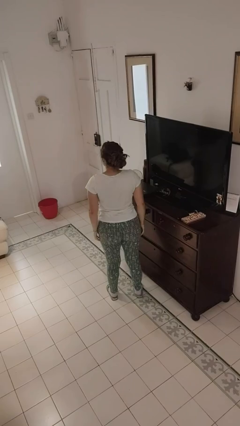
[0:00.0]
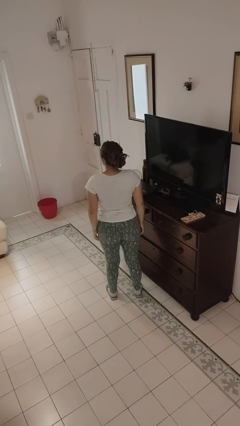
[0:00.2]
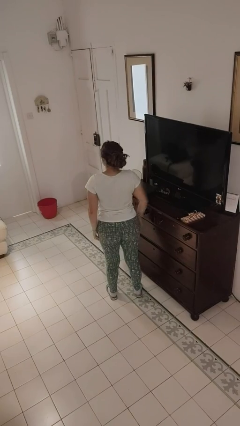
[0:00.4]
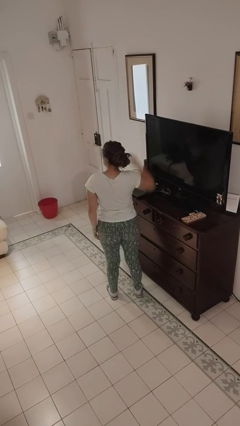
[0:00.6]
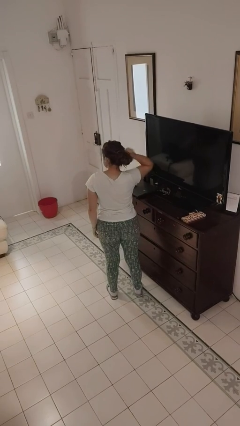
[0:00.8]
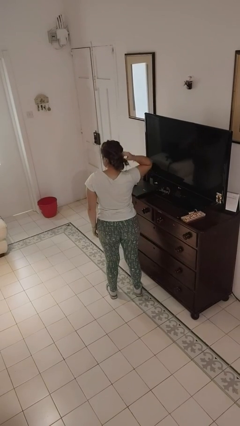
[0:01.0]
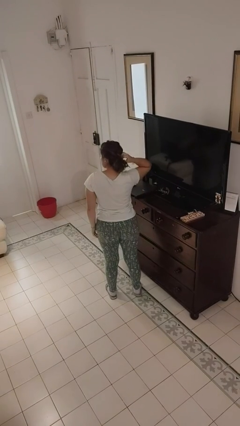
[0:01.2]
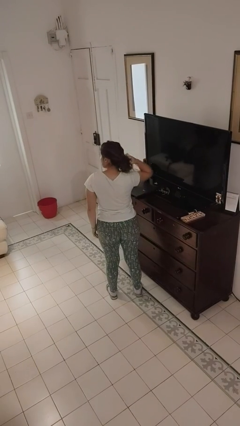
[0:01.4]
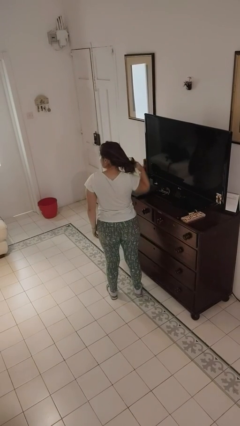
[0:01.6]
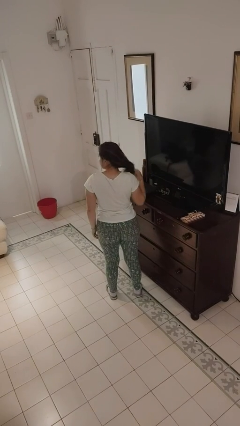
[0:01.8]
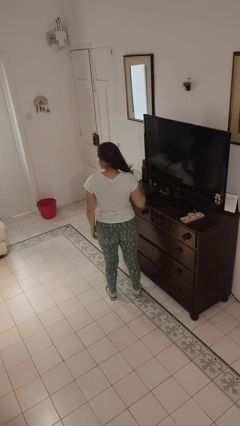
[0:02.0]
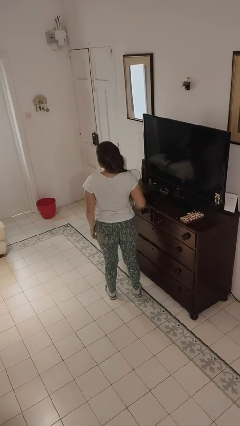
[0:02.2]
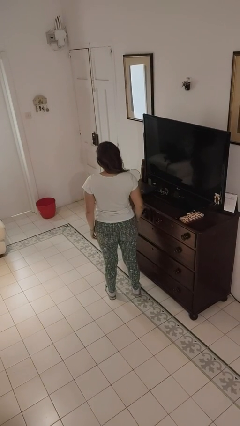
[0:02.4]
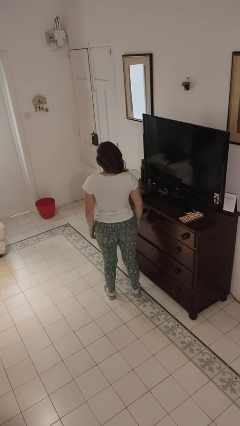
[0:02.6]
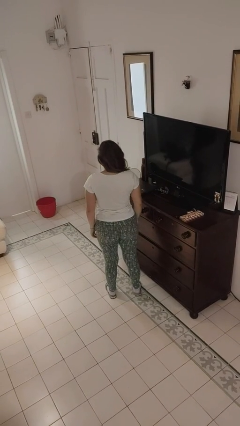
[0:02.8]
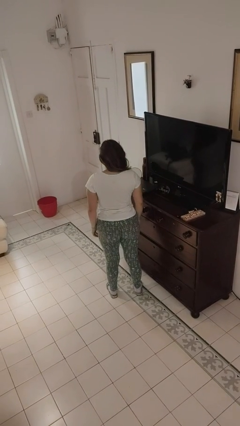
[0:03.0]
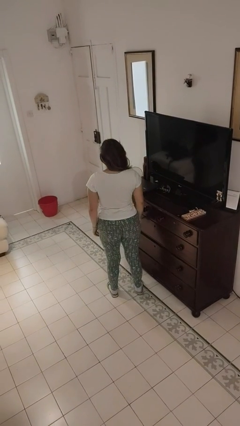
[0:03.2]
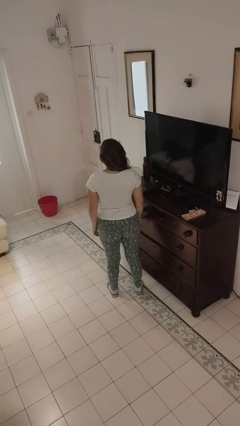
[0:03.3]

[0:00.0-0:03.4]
person takes off hairtie

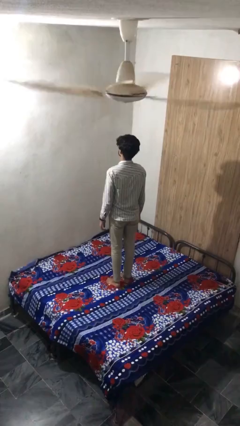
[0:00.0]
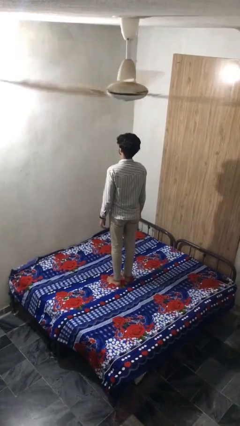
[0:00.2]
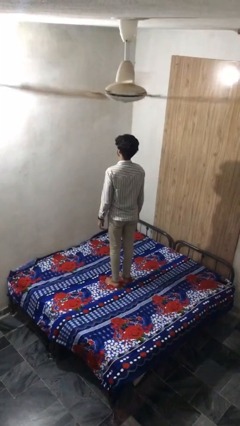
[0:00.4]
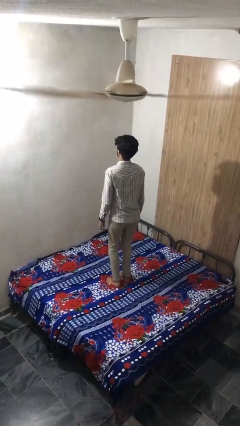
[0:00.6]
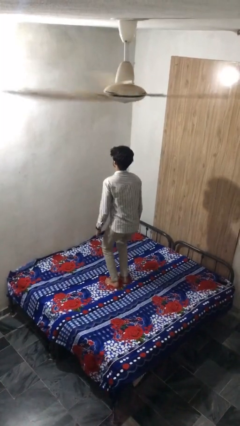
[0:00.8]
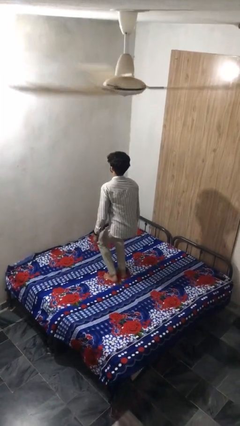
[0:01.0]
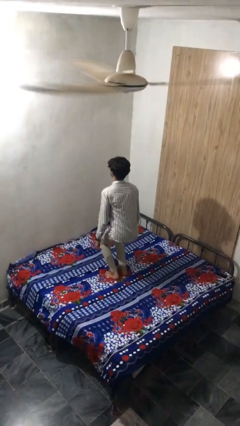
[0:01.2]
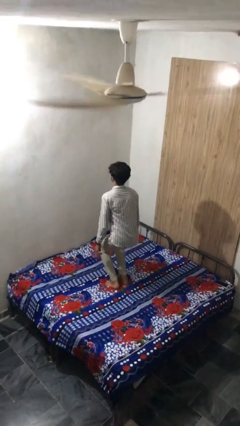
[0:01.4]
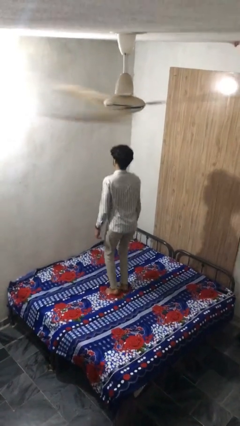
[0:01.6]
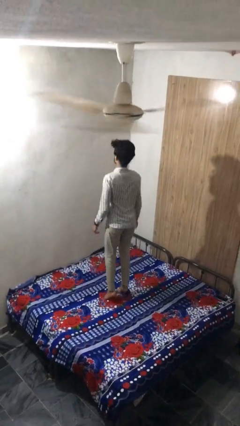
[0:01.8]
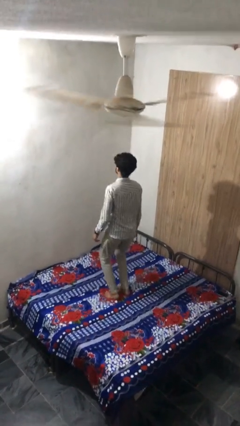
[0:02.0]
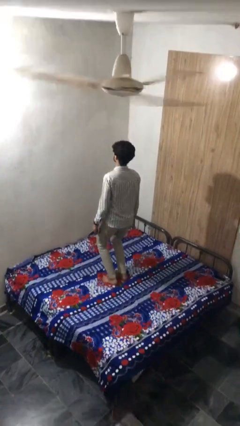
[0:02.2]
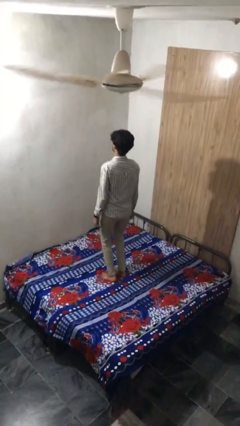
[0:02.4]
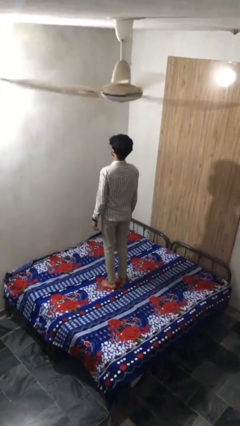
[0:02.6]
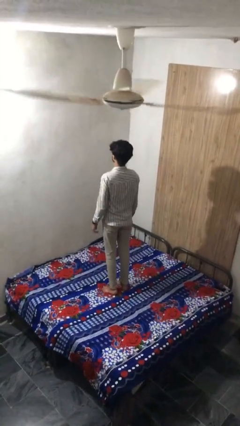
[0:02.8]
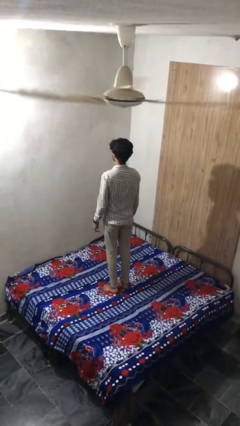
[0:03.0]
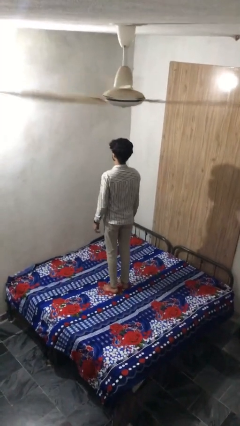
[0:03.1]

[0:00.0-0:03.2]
person jumps on bed

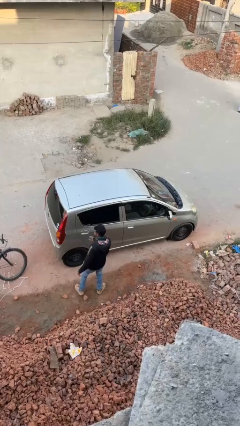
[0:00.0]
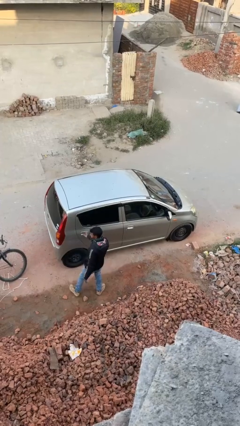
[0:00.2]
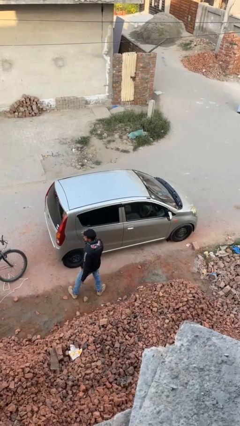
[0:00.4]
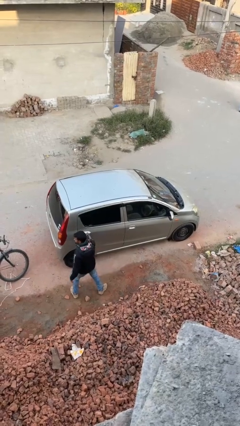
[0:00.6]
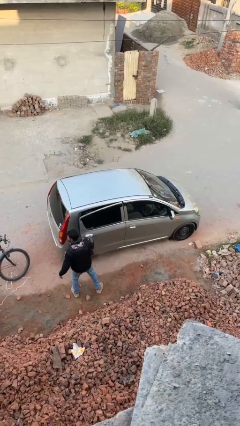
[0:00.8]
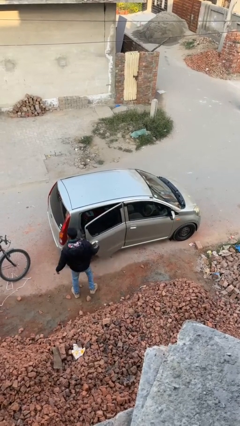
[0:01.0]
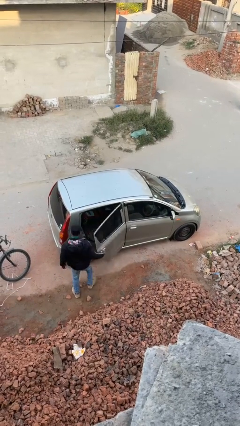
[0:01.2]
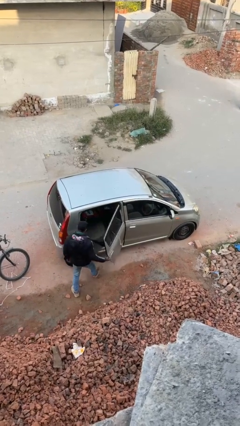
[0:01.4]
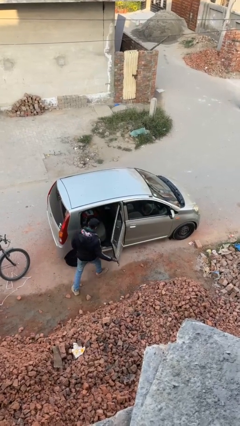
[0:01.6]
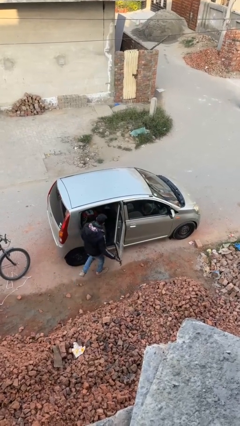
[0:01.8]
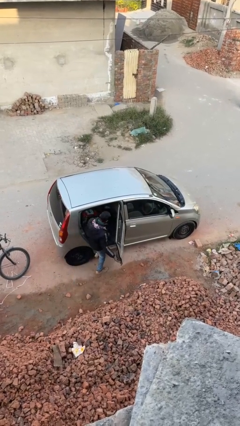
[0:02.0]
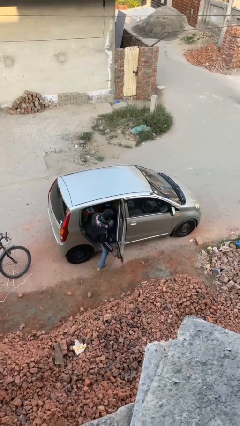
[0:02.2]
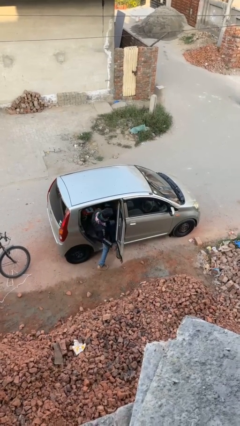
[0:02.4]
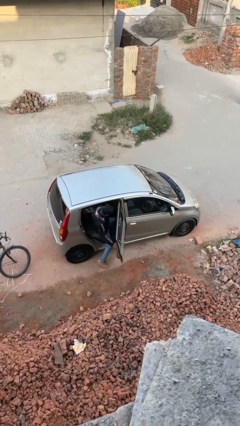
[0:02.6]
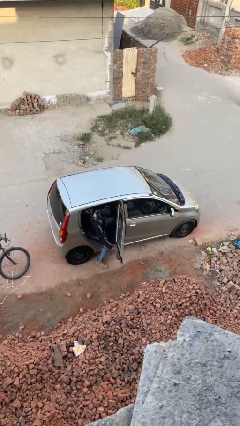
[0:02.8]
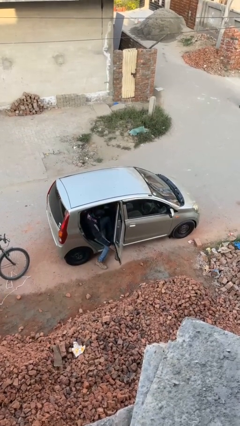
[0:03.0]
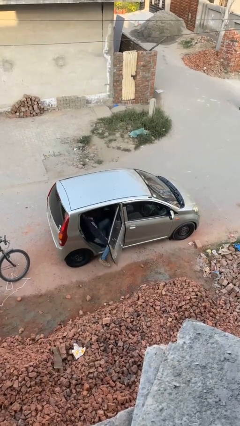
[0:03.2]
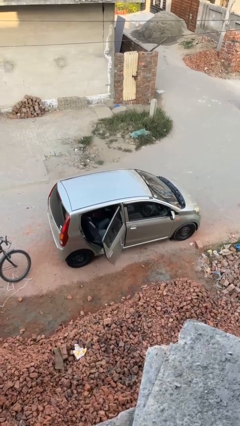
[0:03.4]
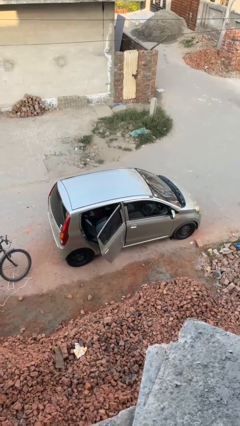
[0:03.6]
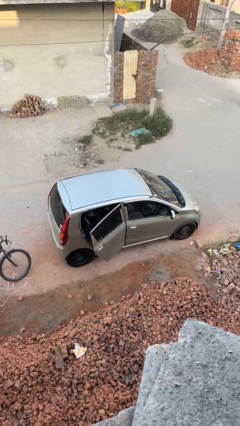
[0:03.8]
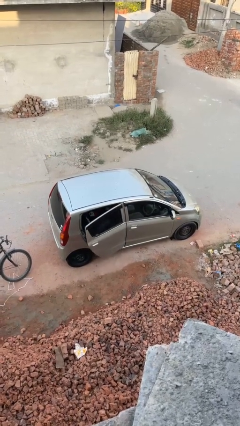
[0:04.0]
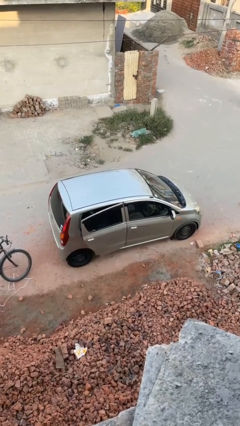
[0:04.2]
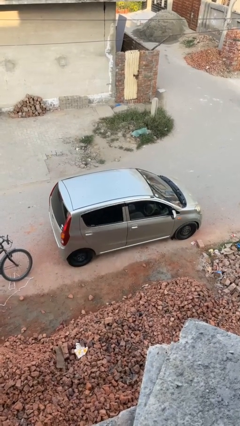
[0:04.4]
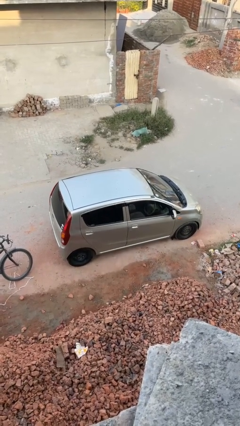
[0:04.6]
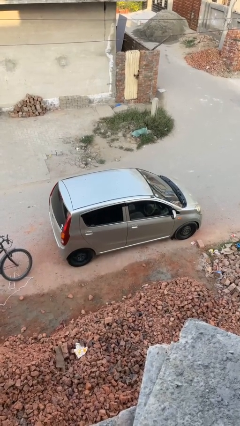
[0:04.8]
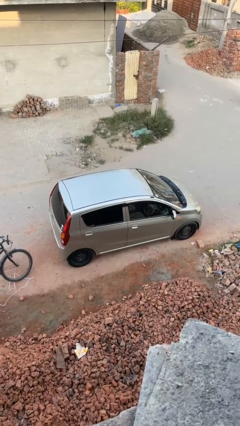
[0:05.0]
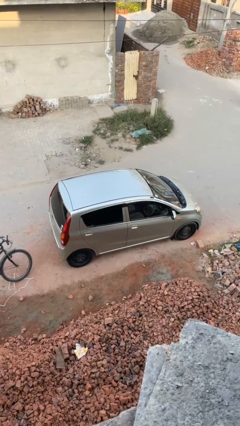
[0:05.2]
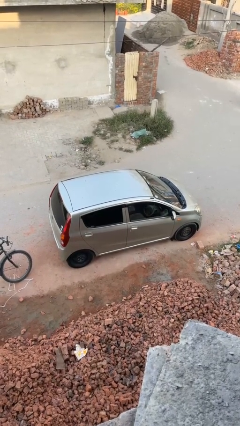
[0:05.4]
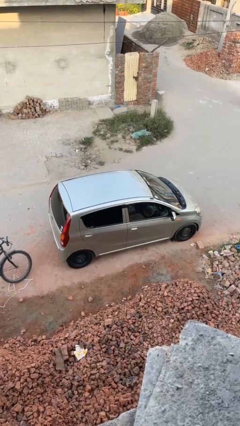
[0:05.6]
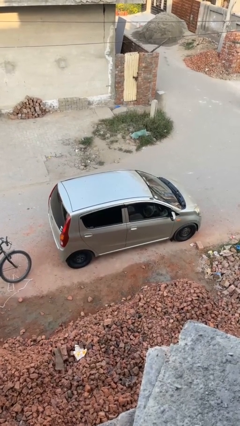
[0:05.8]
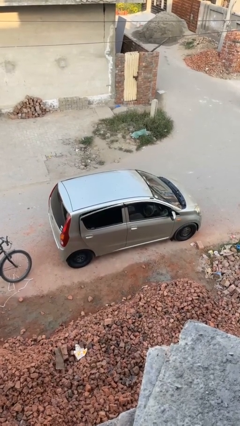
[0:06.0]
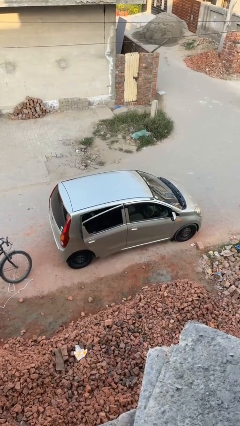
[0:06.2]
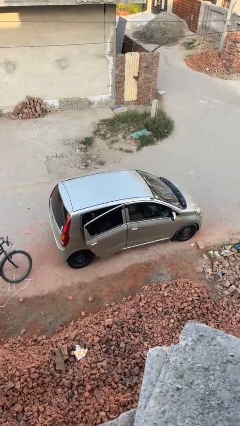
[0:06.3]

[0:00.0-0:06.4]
car picks up person

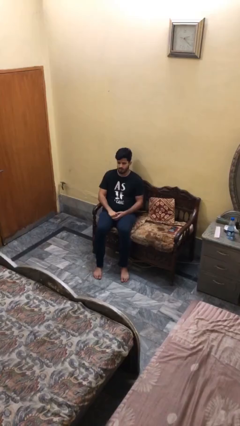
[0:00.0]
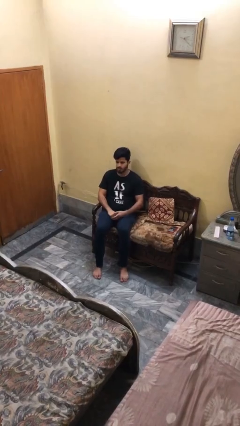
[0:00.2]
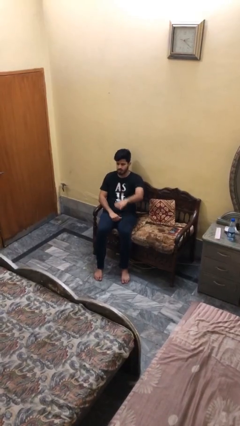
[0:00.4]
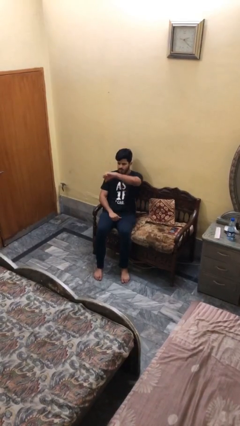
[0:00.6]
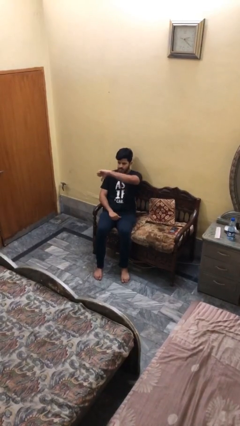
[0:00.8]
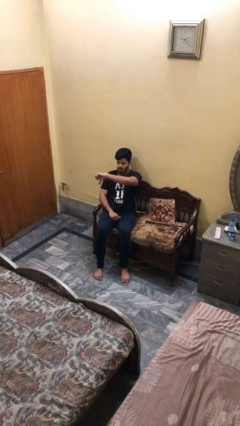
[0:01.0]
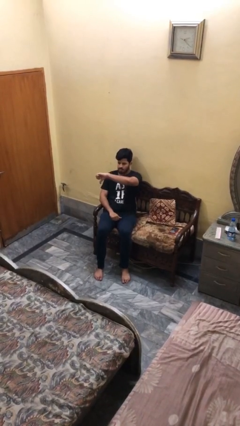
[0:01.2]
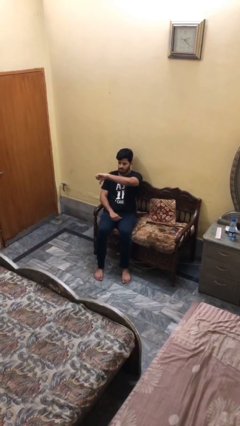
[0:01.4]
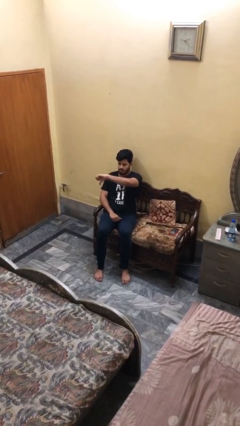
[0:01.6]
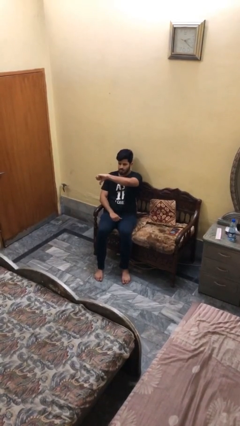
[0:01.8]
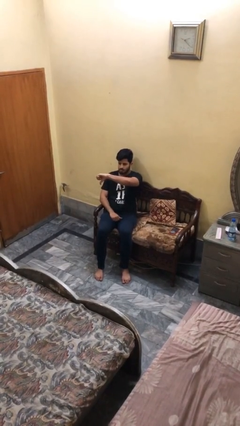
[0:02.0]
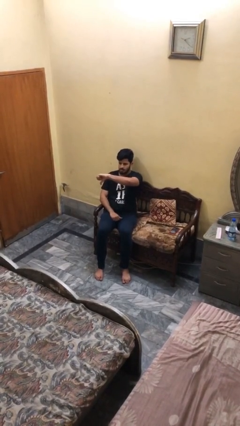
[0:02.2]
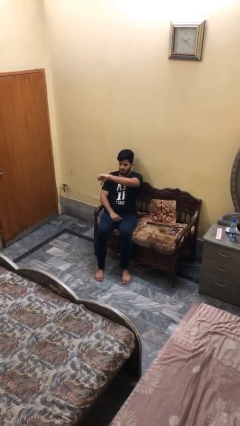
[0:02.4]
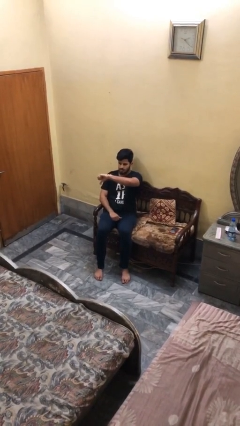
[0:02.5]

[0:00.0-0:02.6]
person gestures thumbs down

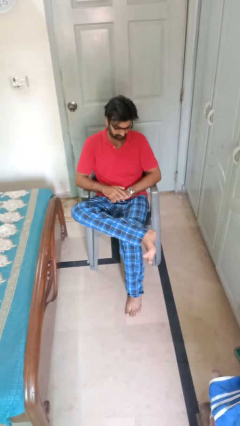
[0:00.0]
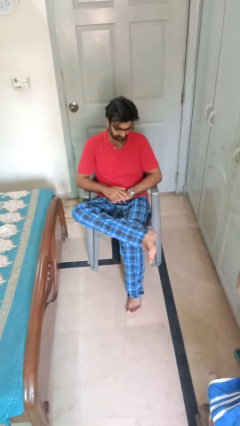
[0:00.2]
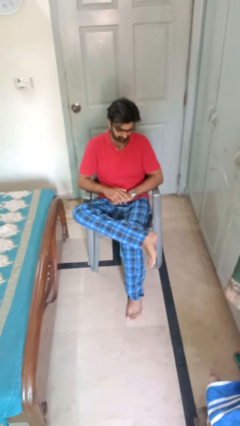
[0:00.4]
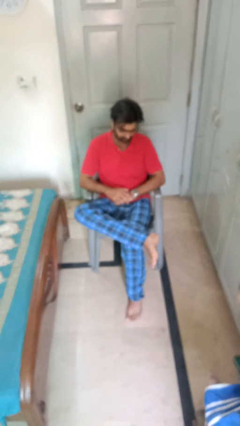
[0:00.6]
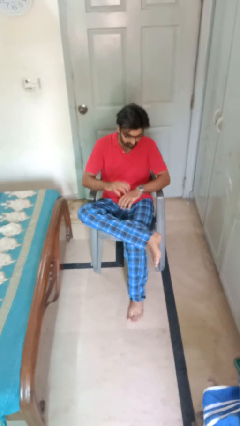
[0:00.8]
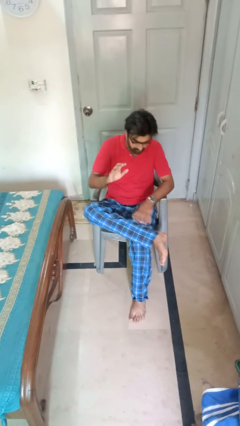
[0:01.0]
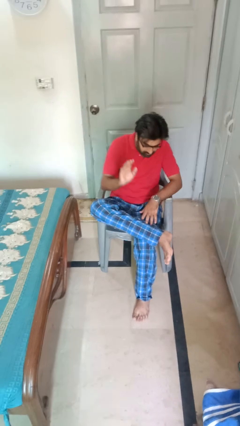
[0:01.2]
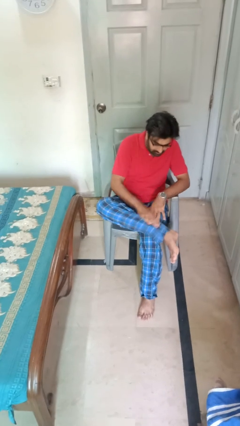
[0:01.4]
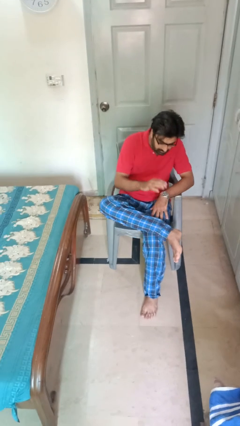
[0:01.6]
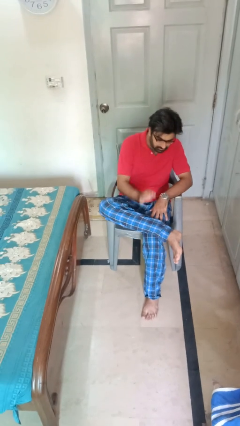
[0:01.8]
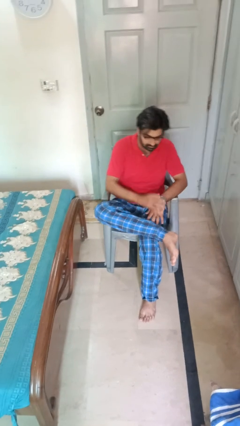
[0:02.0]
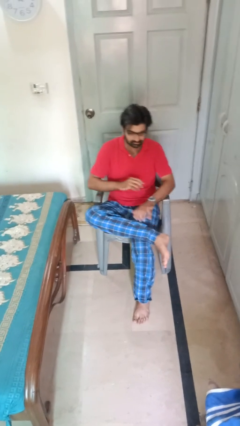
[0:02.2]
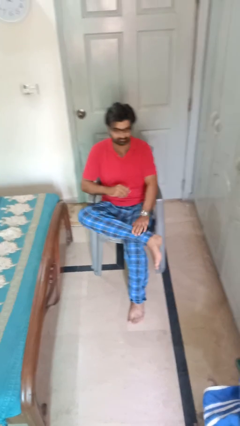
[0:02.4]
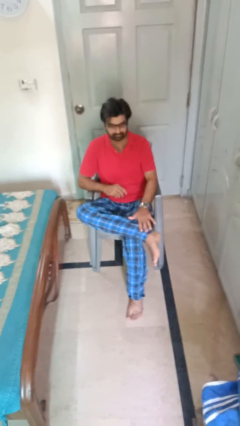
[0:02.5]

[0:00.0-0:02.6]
person swats bug
